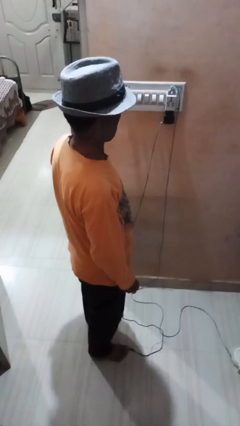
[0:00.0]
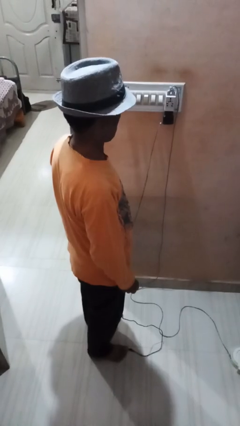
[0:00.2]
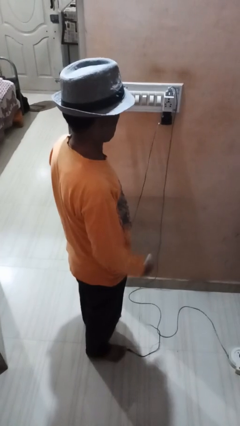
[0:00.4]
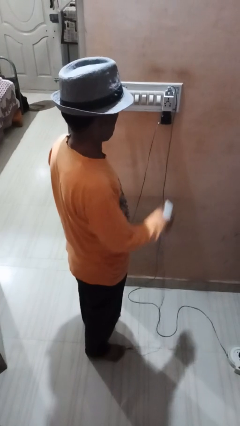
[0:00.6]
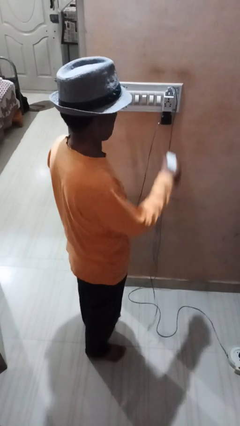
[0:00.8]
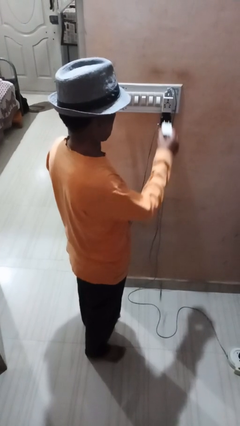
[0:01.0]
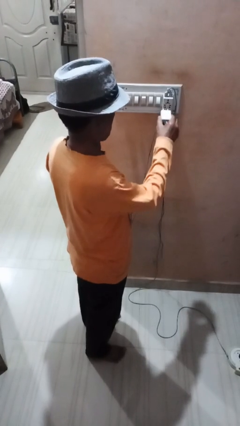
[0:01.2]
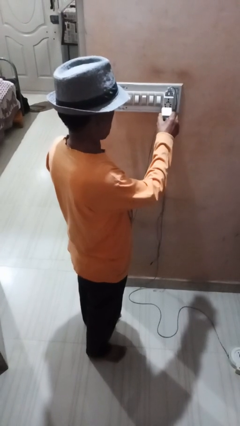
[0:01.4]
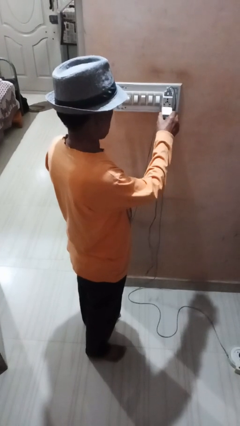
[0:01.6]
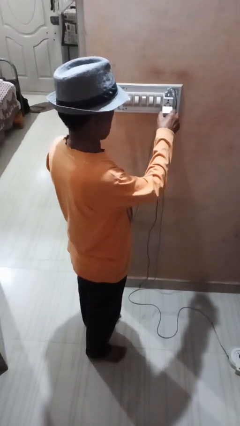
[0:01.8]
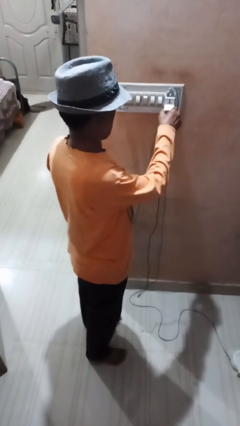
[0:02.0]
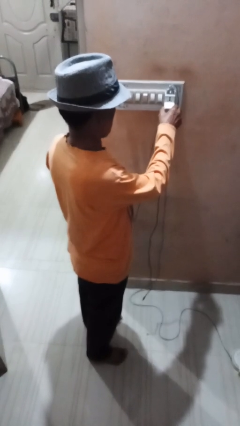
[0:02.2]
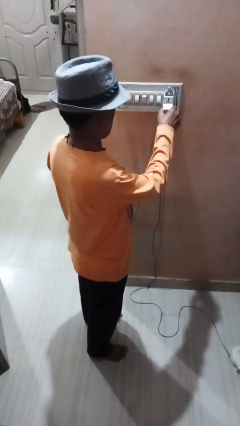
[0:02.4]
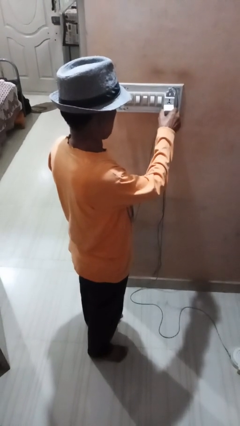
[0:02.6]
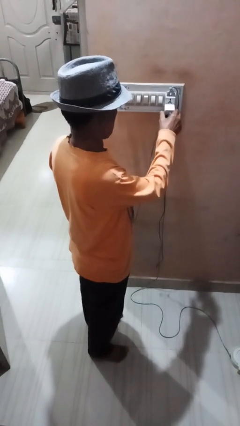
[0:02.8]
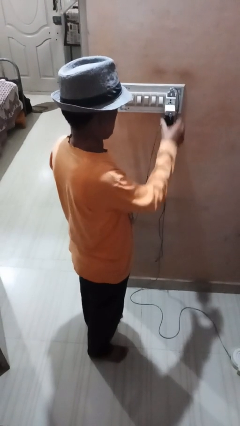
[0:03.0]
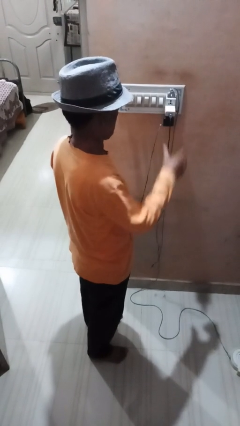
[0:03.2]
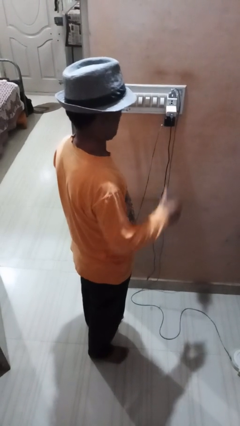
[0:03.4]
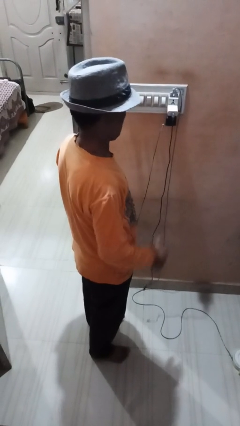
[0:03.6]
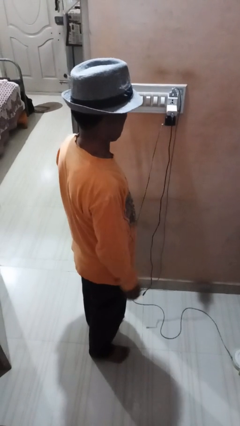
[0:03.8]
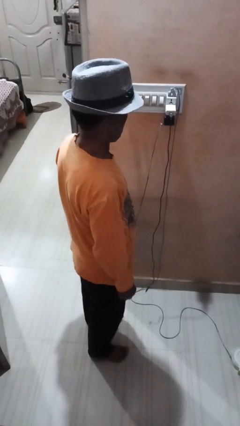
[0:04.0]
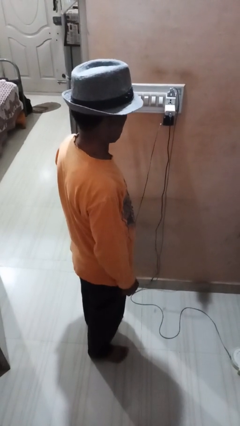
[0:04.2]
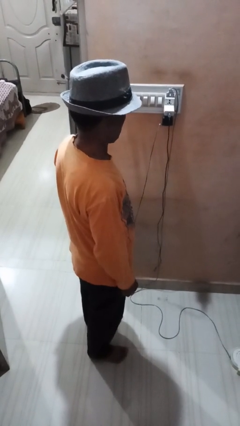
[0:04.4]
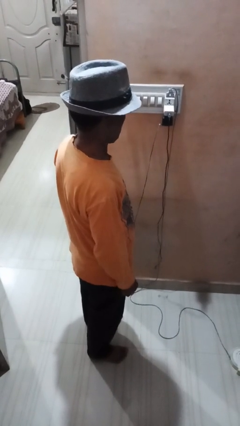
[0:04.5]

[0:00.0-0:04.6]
person plugs into electrical socket

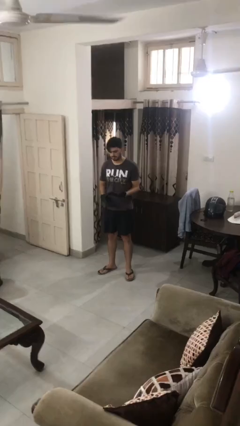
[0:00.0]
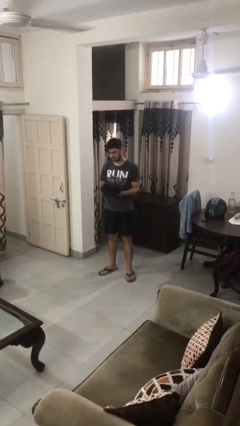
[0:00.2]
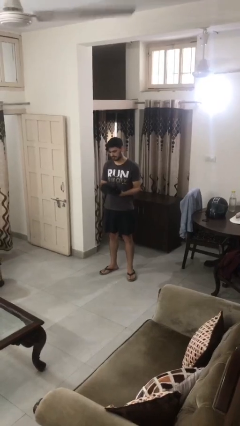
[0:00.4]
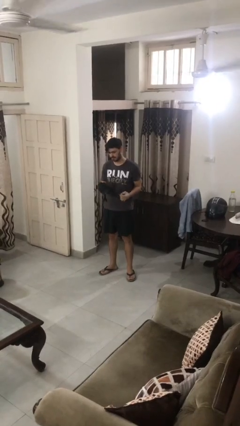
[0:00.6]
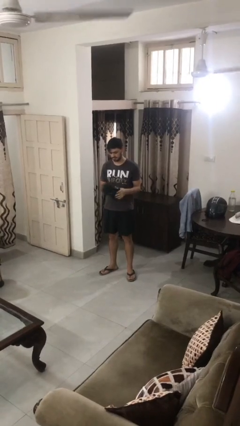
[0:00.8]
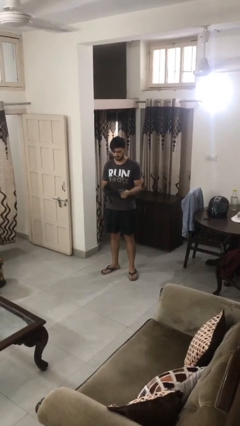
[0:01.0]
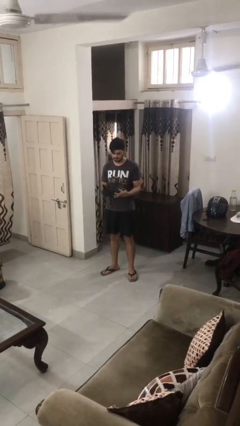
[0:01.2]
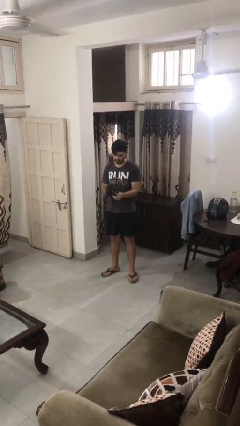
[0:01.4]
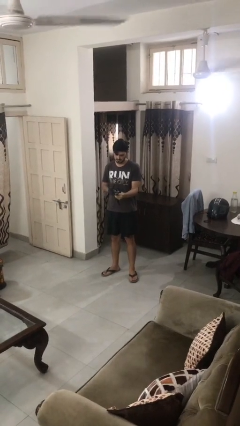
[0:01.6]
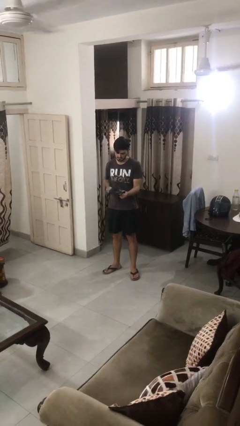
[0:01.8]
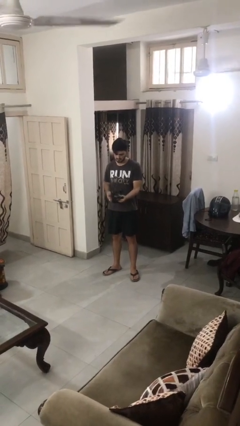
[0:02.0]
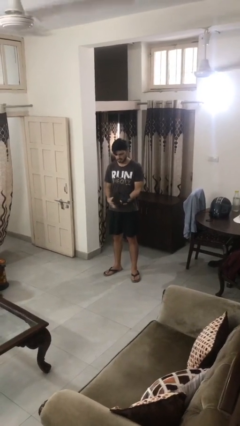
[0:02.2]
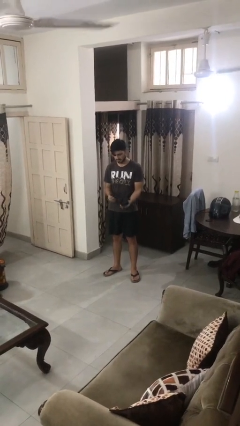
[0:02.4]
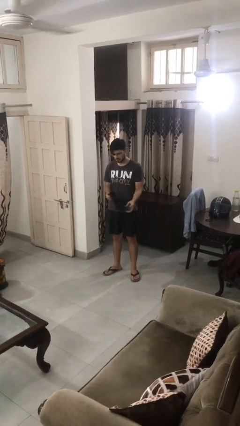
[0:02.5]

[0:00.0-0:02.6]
person takes off gloves

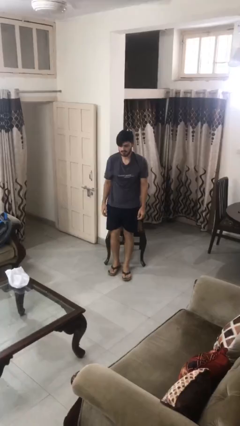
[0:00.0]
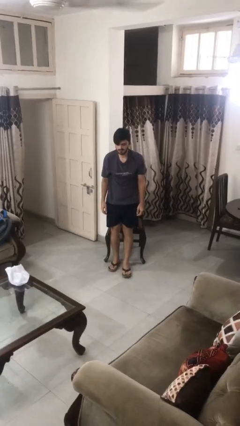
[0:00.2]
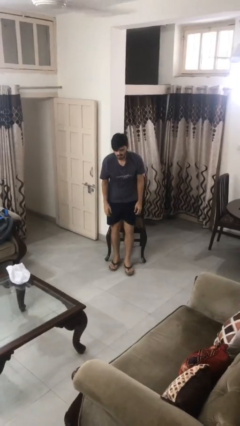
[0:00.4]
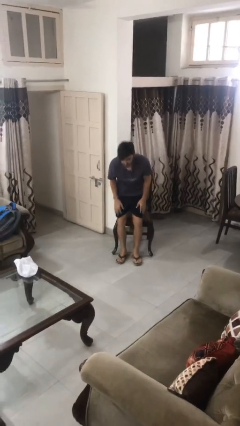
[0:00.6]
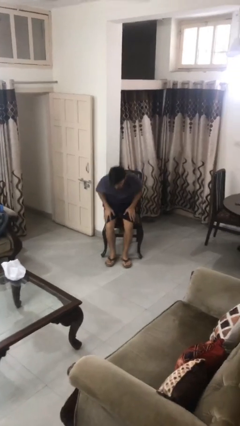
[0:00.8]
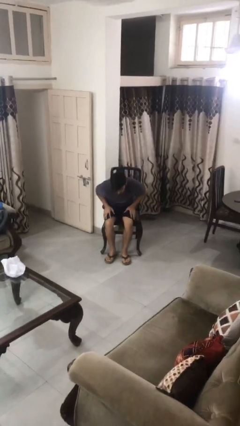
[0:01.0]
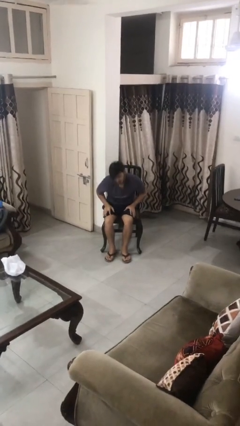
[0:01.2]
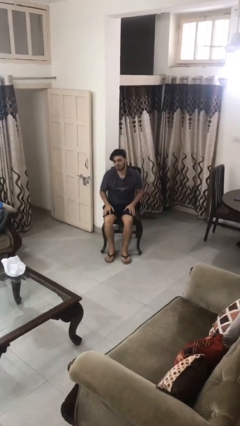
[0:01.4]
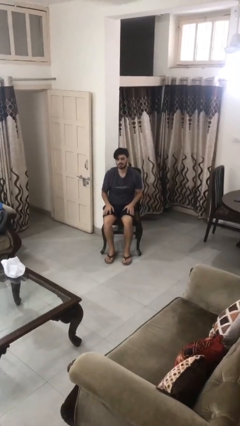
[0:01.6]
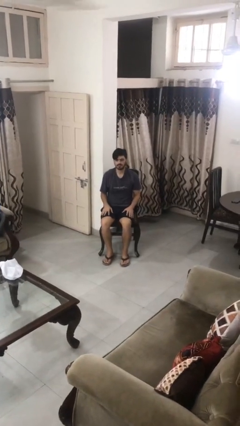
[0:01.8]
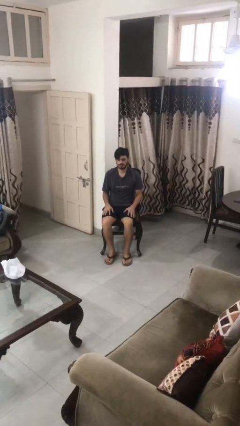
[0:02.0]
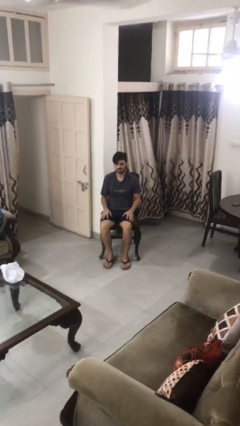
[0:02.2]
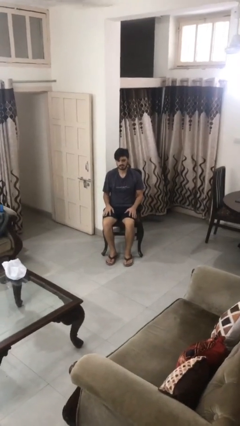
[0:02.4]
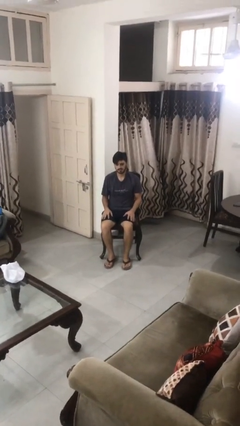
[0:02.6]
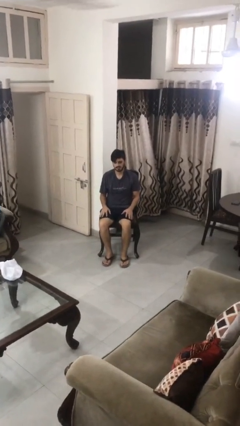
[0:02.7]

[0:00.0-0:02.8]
person sits down

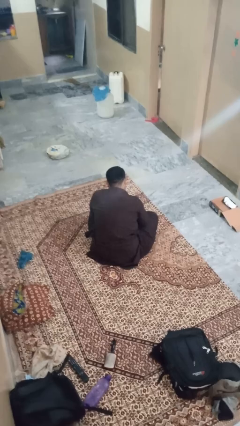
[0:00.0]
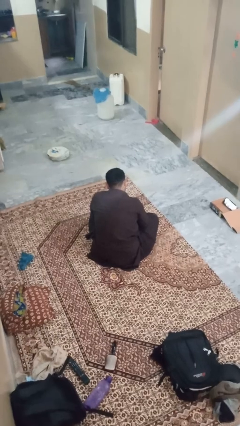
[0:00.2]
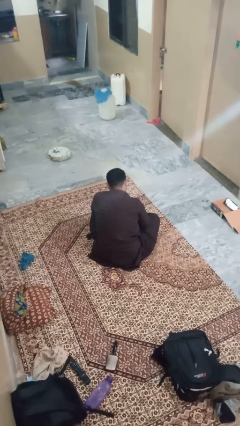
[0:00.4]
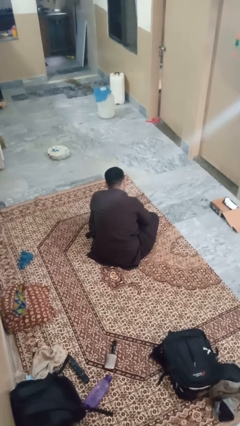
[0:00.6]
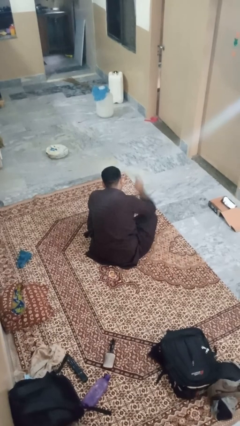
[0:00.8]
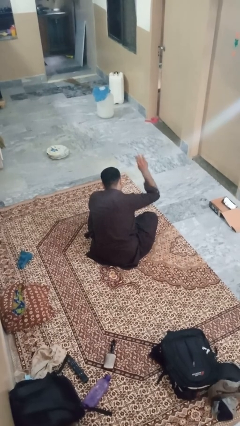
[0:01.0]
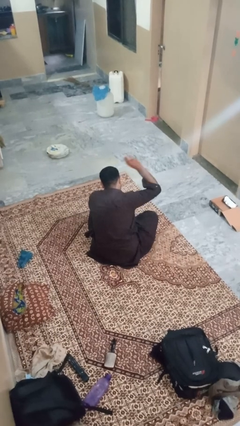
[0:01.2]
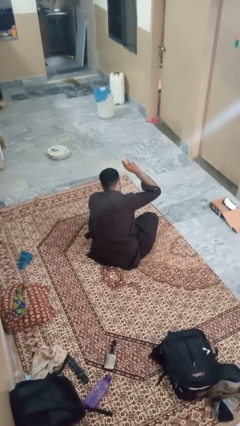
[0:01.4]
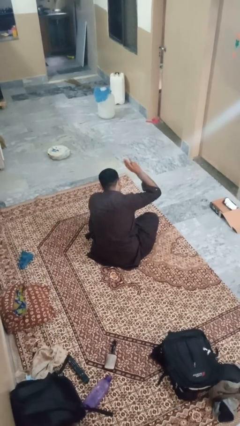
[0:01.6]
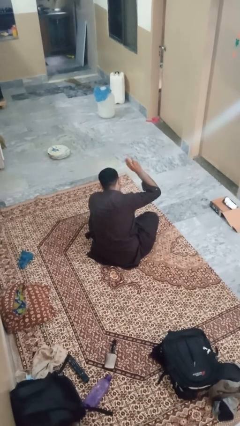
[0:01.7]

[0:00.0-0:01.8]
person gestures number three

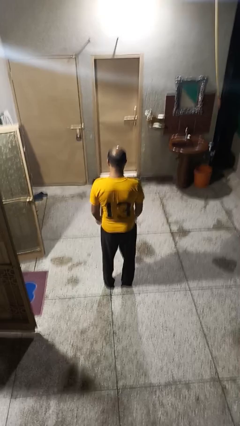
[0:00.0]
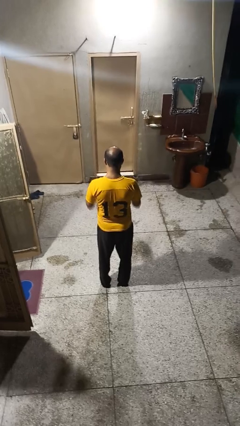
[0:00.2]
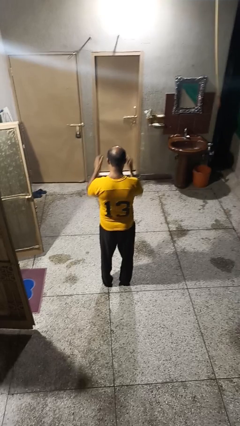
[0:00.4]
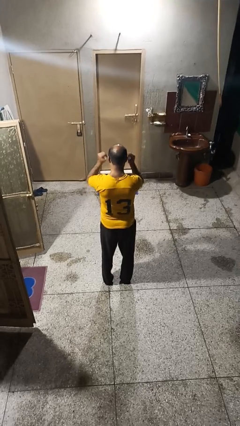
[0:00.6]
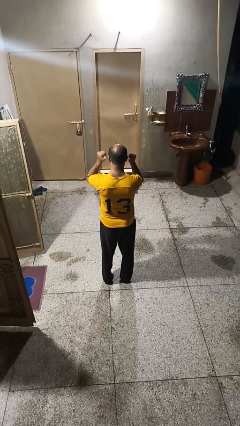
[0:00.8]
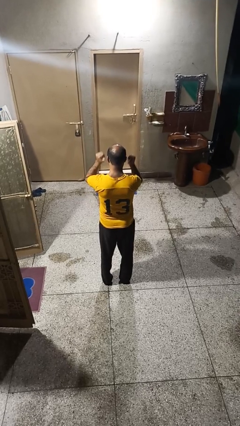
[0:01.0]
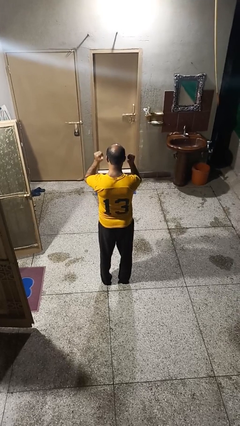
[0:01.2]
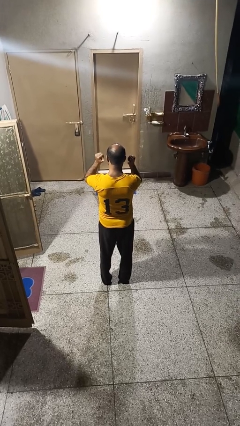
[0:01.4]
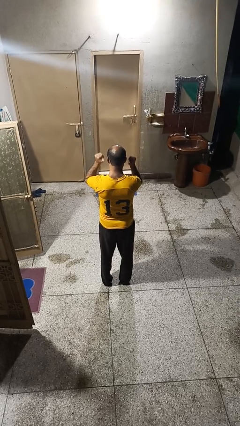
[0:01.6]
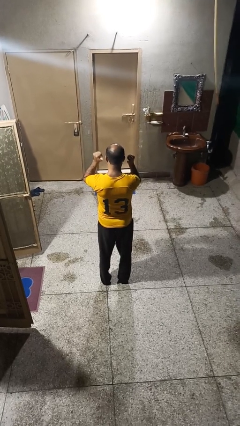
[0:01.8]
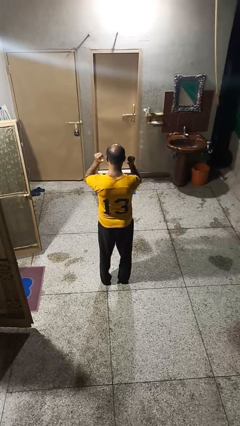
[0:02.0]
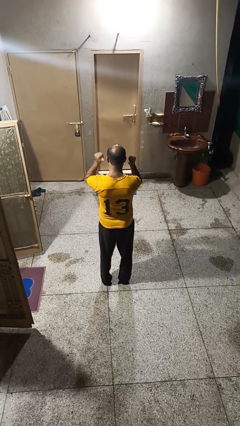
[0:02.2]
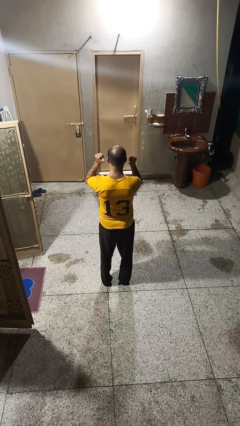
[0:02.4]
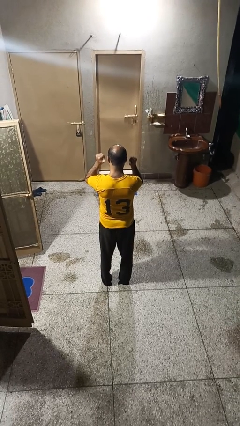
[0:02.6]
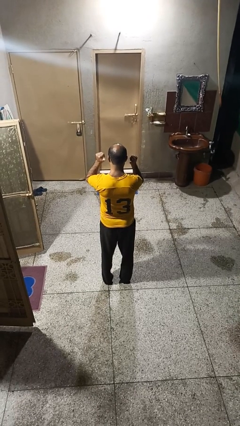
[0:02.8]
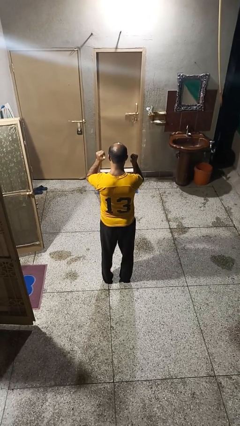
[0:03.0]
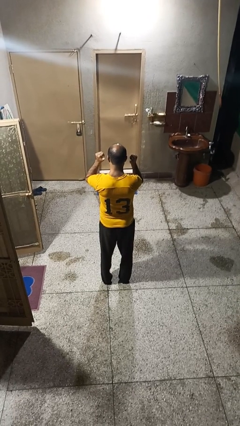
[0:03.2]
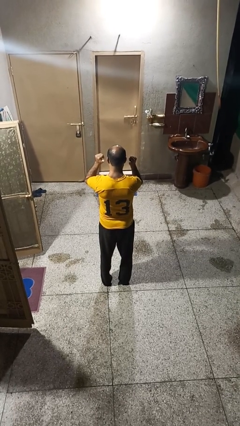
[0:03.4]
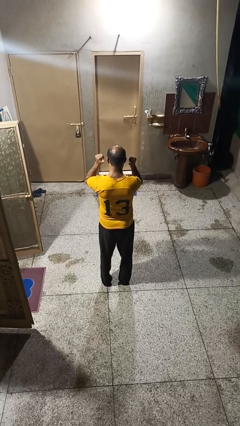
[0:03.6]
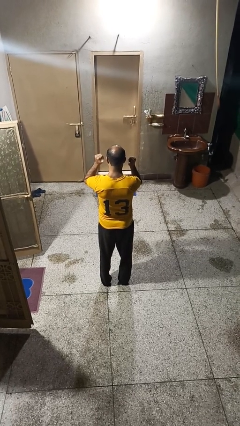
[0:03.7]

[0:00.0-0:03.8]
person gestures behind me

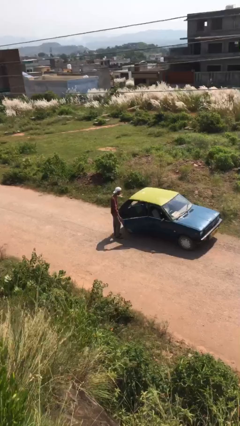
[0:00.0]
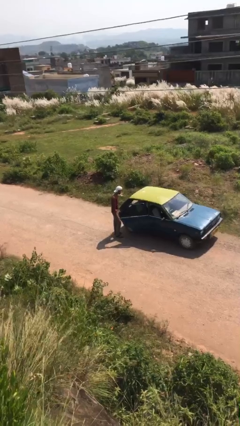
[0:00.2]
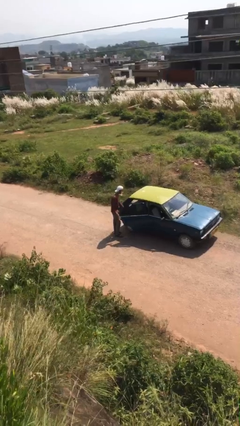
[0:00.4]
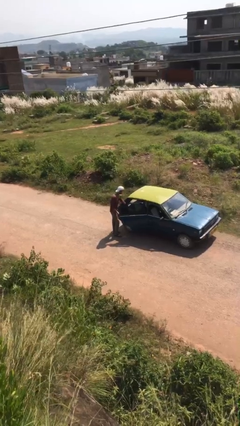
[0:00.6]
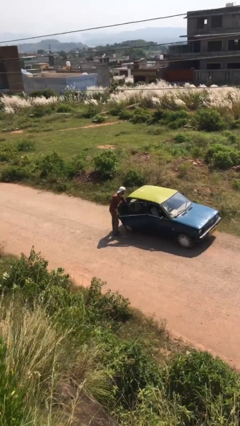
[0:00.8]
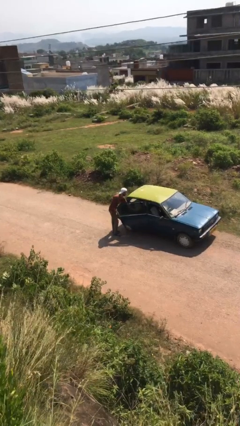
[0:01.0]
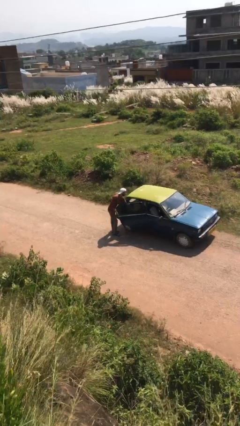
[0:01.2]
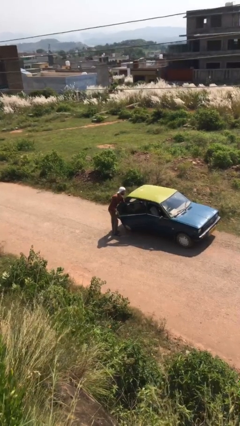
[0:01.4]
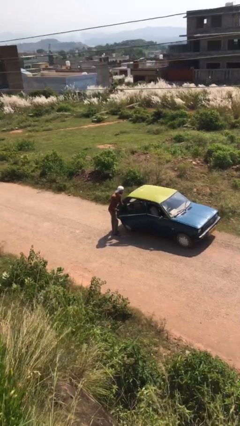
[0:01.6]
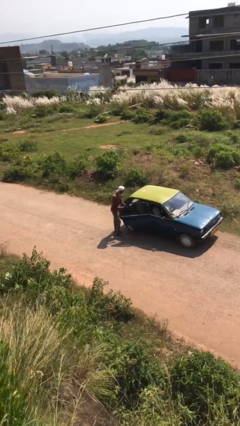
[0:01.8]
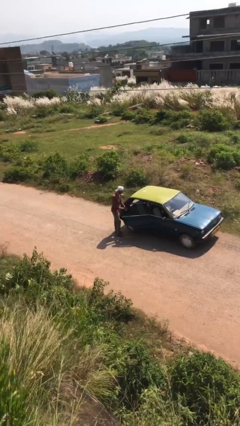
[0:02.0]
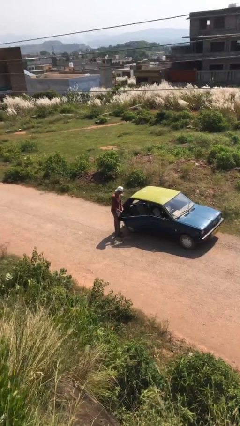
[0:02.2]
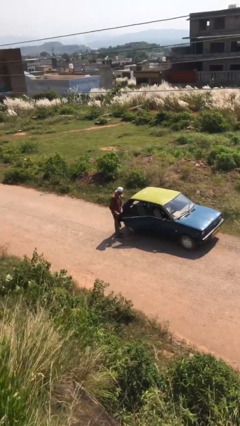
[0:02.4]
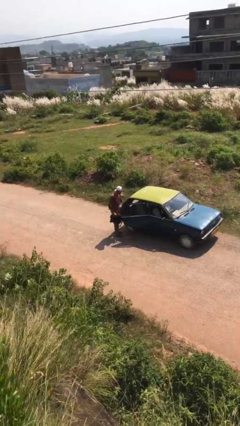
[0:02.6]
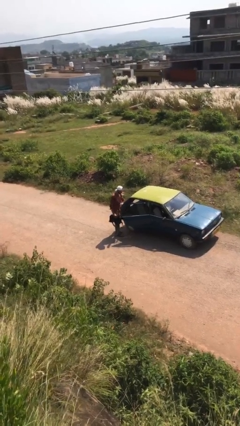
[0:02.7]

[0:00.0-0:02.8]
person unloads car
